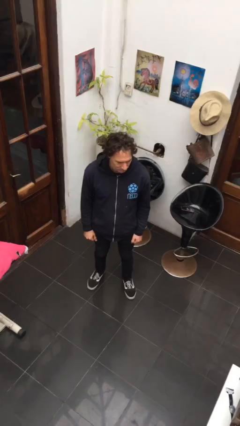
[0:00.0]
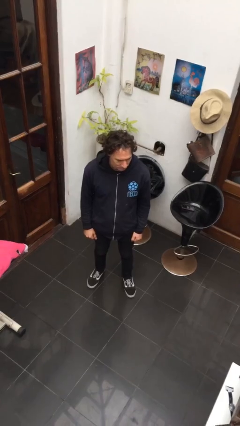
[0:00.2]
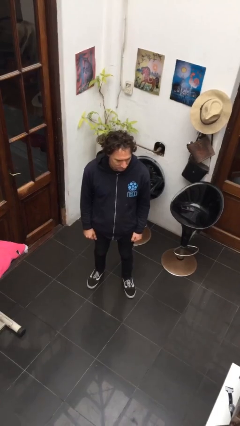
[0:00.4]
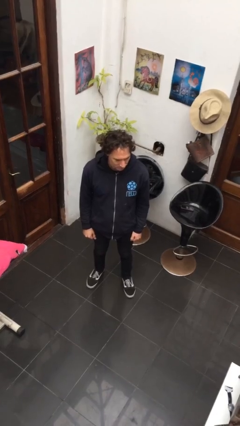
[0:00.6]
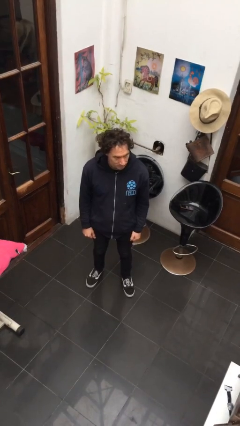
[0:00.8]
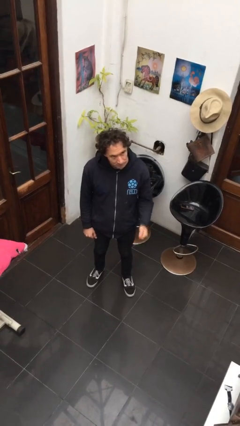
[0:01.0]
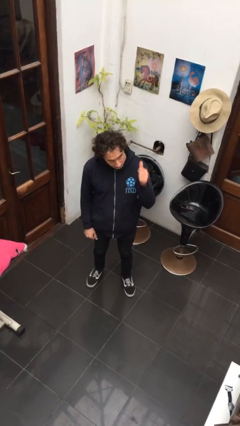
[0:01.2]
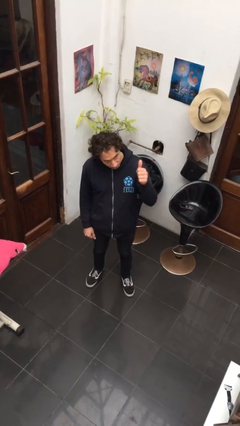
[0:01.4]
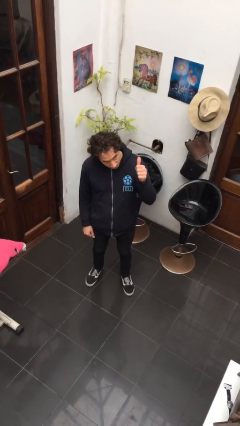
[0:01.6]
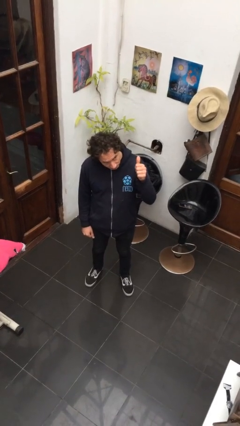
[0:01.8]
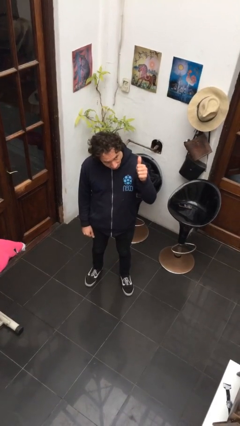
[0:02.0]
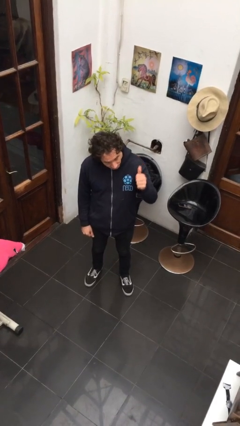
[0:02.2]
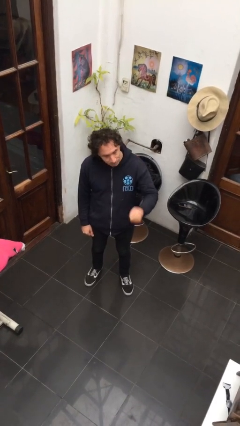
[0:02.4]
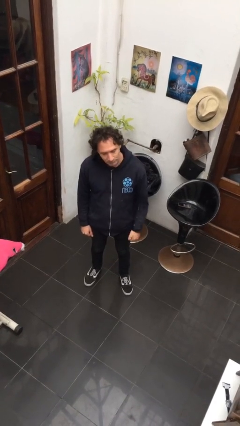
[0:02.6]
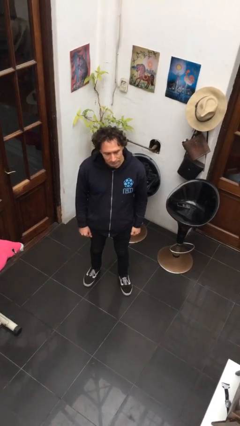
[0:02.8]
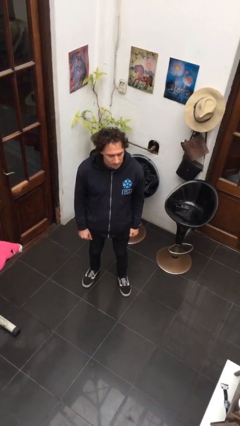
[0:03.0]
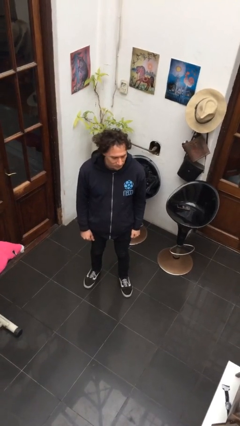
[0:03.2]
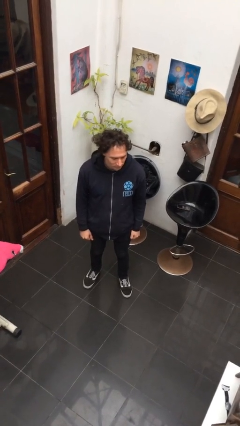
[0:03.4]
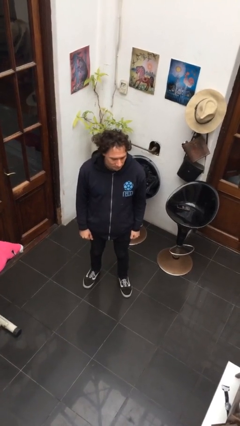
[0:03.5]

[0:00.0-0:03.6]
person gestures thumbs up

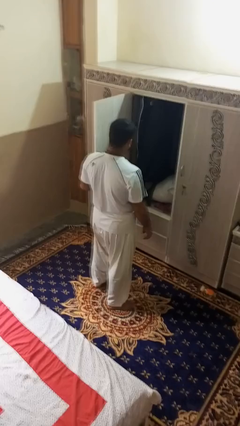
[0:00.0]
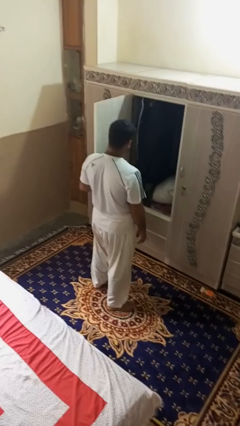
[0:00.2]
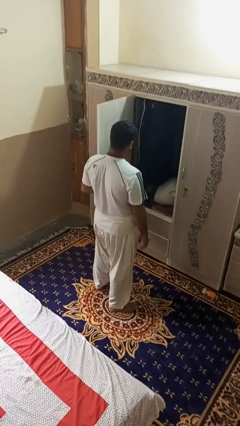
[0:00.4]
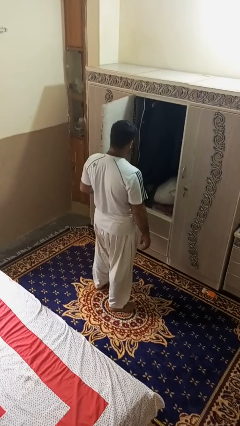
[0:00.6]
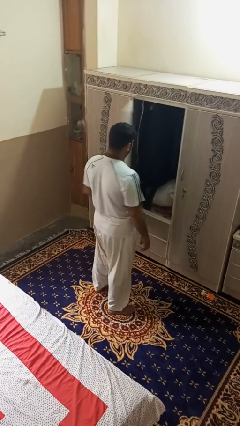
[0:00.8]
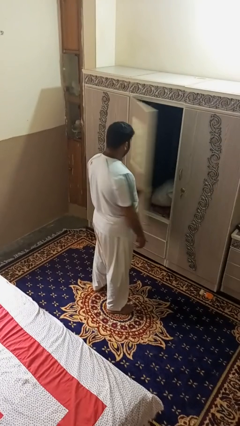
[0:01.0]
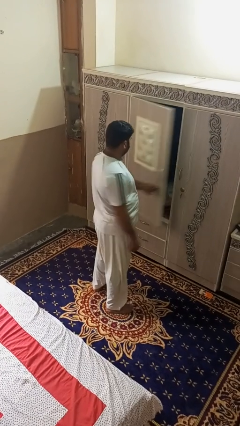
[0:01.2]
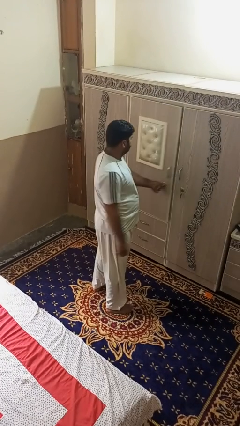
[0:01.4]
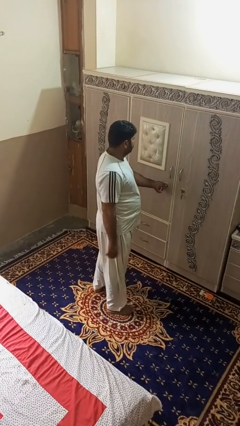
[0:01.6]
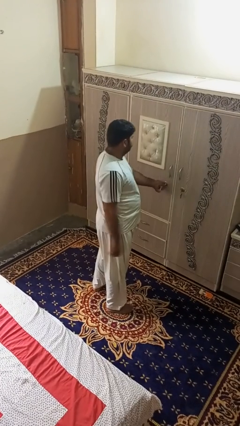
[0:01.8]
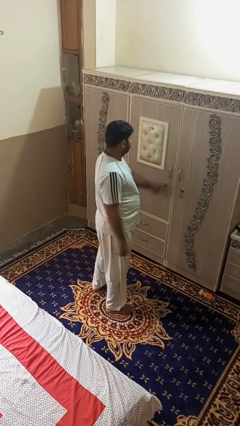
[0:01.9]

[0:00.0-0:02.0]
person closes dresser drawer

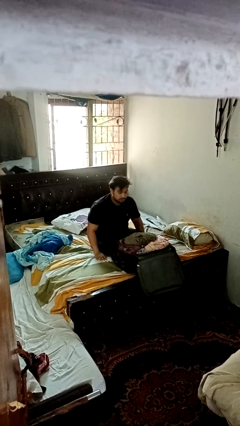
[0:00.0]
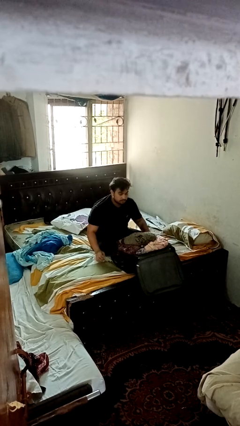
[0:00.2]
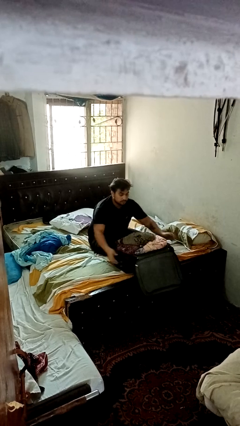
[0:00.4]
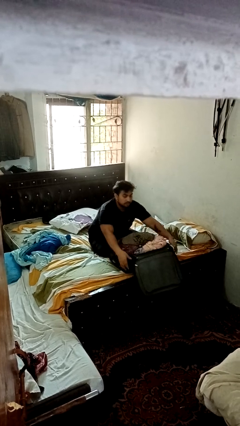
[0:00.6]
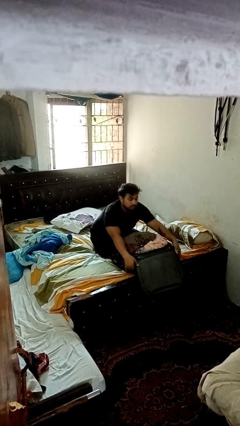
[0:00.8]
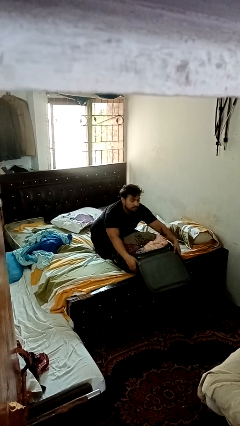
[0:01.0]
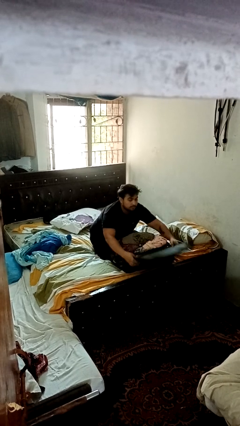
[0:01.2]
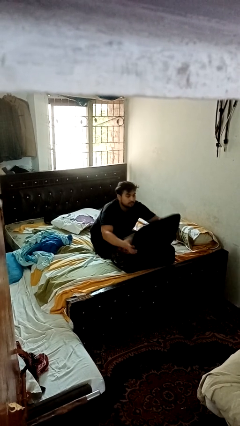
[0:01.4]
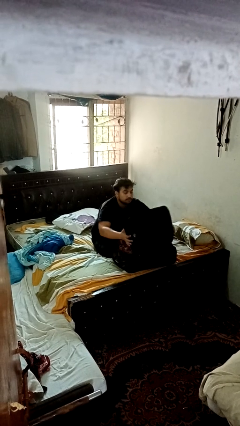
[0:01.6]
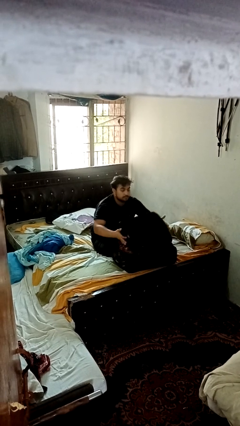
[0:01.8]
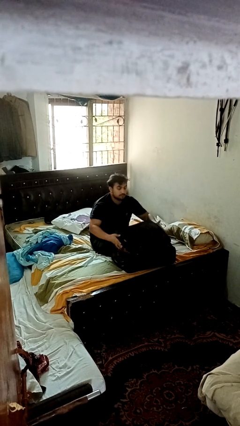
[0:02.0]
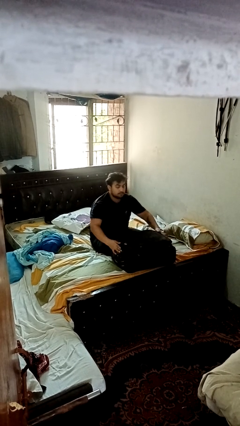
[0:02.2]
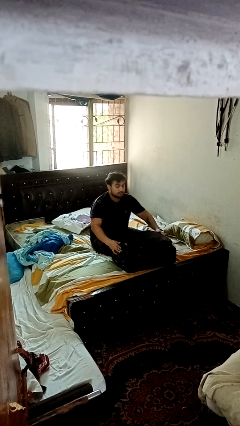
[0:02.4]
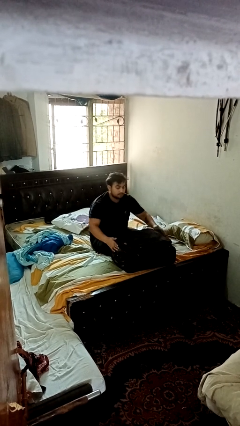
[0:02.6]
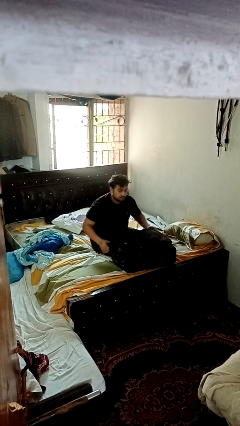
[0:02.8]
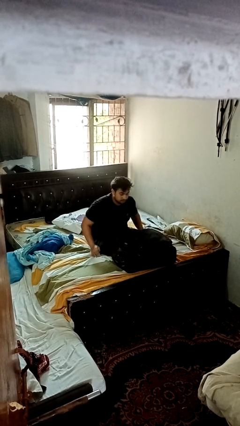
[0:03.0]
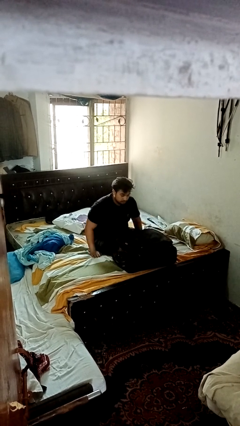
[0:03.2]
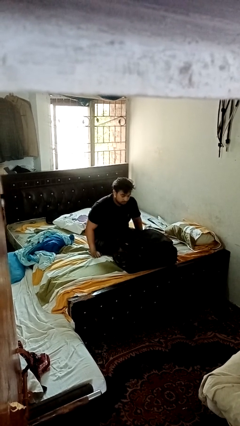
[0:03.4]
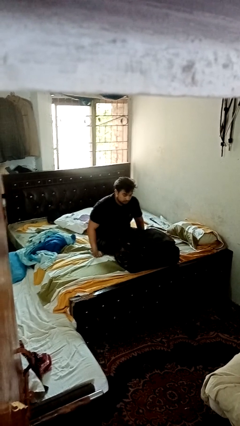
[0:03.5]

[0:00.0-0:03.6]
person closes suitcase

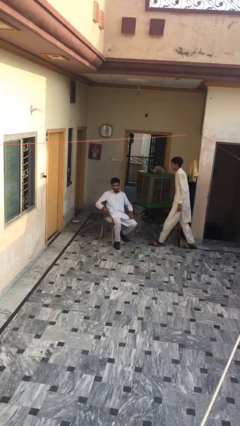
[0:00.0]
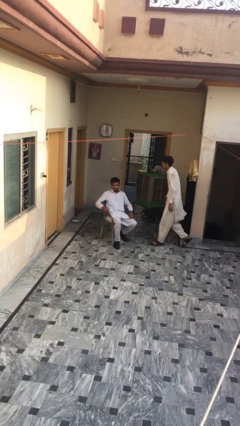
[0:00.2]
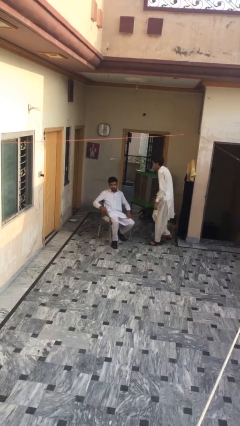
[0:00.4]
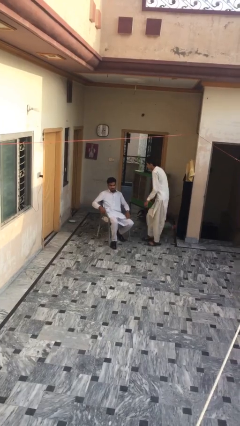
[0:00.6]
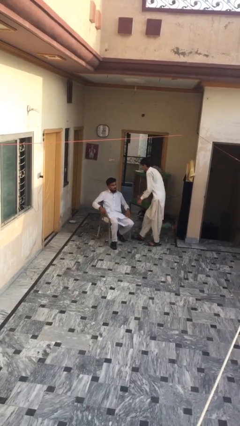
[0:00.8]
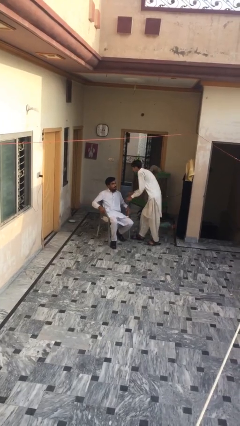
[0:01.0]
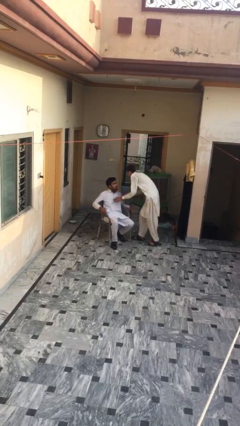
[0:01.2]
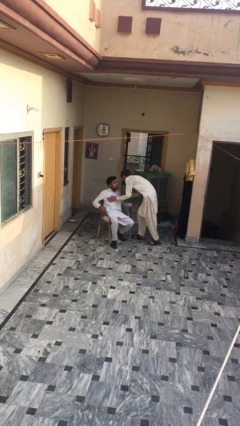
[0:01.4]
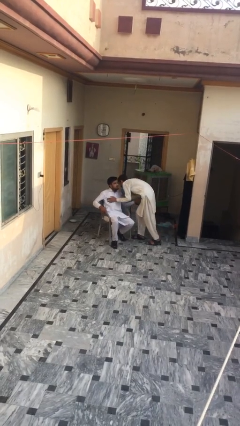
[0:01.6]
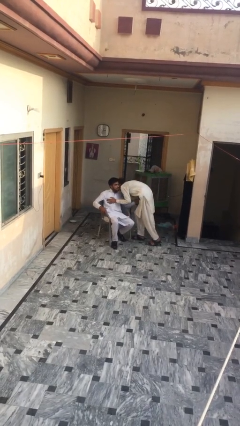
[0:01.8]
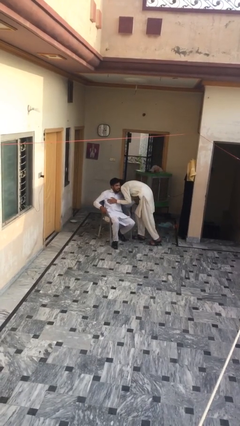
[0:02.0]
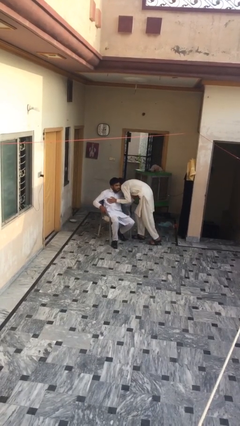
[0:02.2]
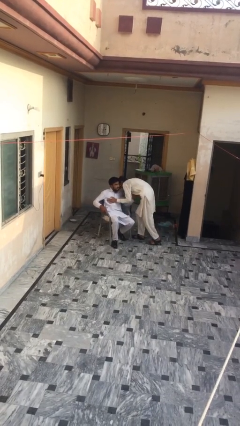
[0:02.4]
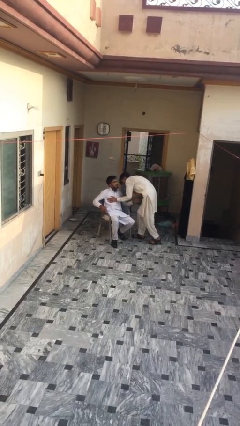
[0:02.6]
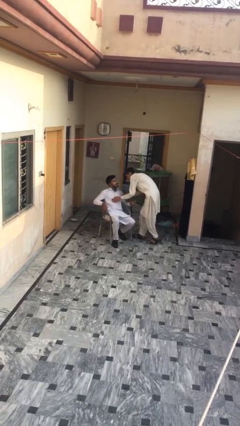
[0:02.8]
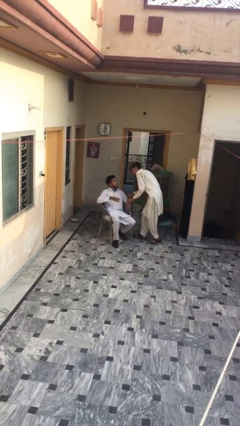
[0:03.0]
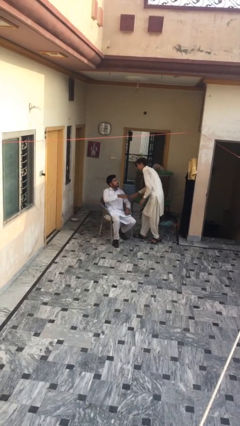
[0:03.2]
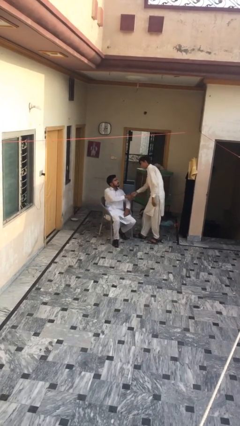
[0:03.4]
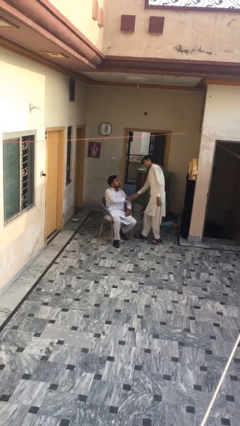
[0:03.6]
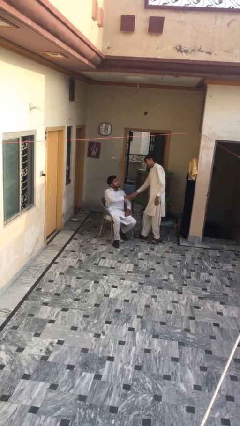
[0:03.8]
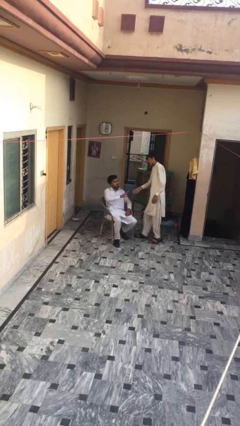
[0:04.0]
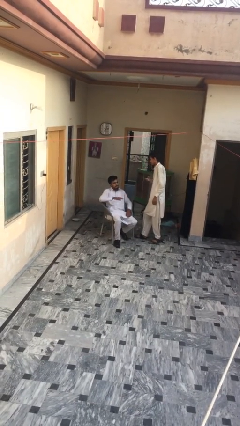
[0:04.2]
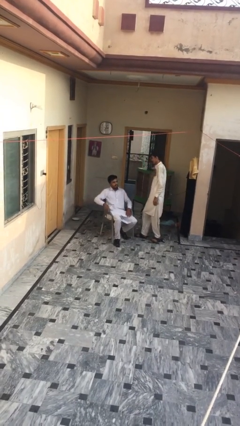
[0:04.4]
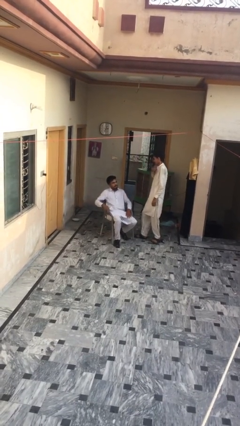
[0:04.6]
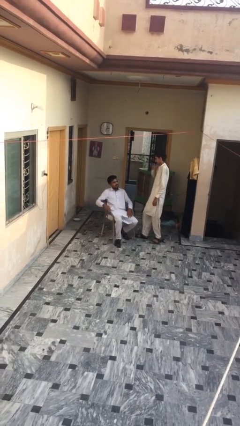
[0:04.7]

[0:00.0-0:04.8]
person embraces person

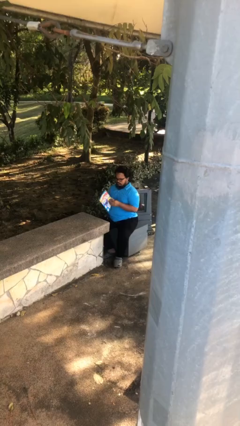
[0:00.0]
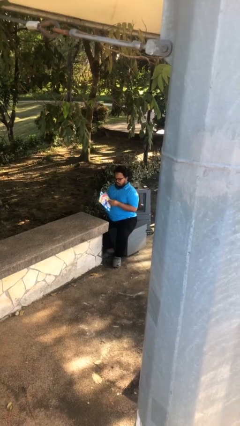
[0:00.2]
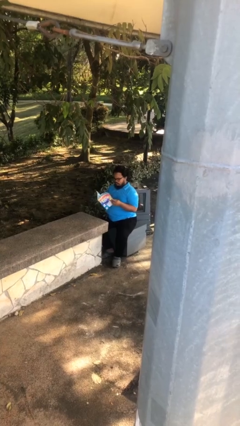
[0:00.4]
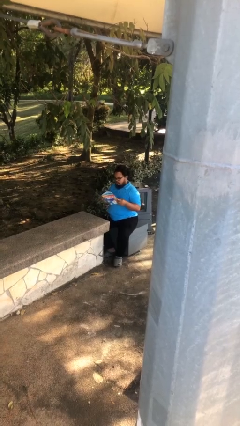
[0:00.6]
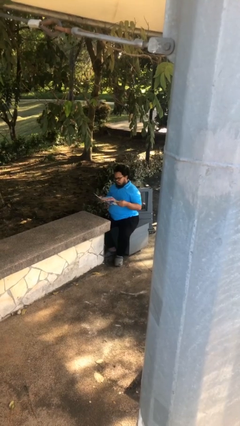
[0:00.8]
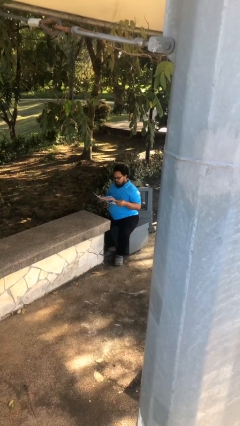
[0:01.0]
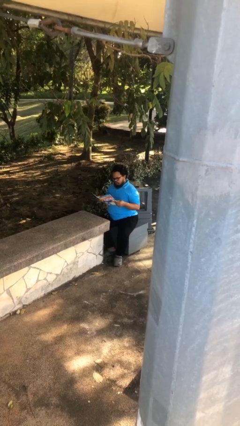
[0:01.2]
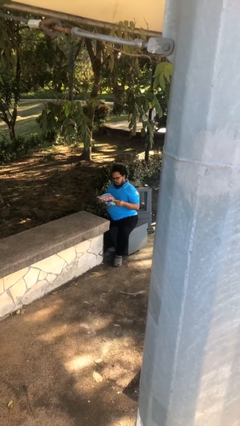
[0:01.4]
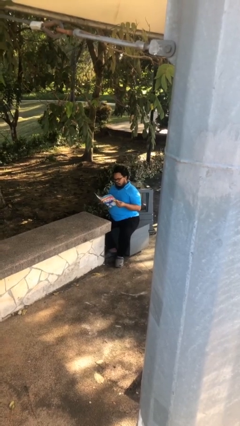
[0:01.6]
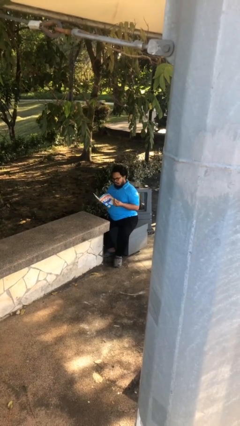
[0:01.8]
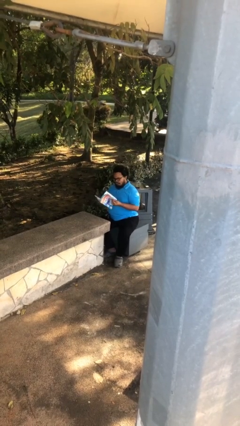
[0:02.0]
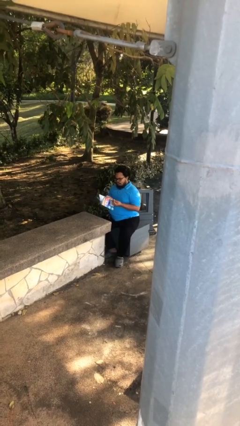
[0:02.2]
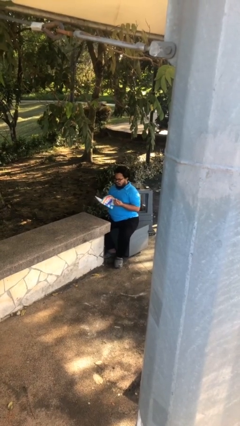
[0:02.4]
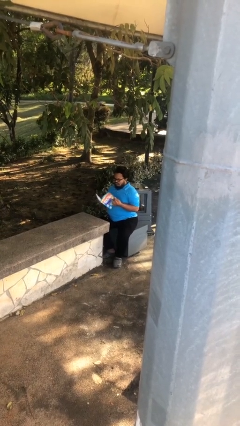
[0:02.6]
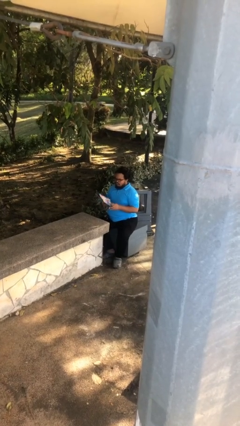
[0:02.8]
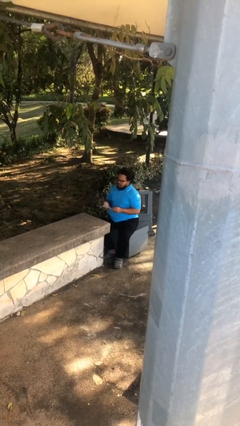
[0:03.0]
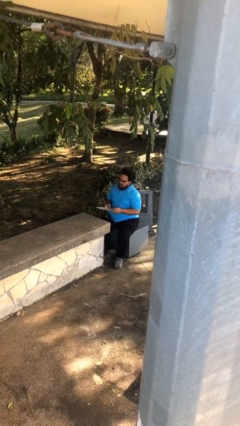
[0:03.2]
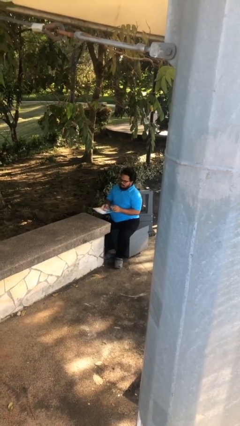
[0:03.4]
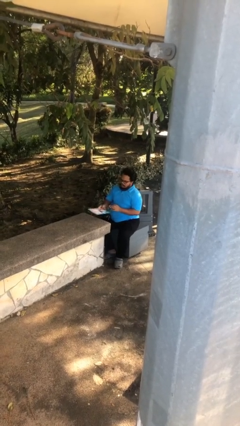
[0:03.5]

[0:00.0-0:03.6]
person reads document
